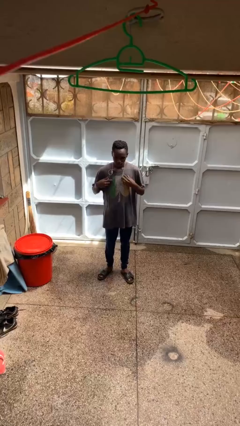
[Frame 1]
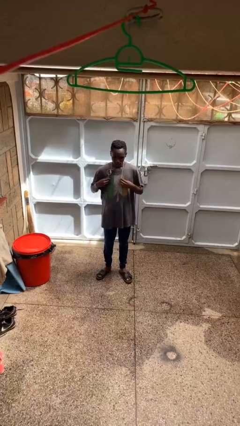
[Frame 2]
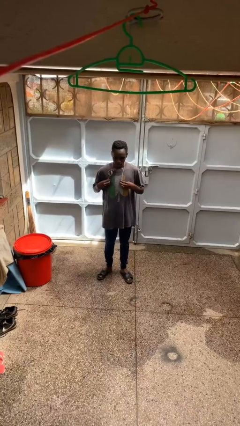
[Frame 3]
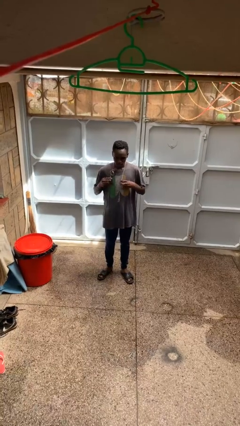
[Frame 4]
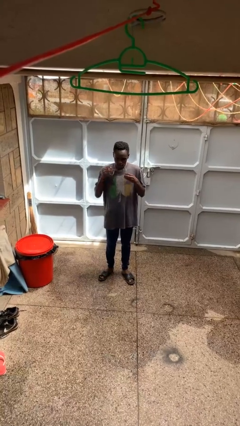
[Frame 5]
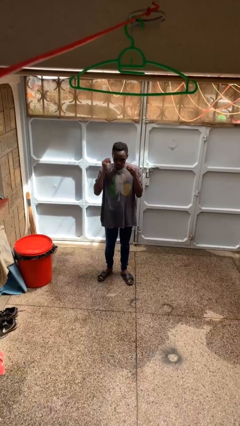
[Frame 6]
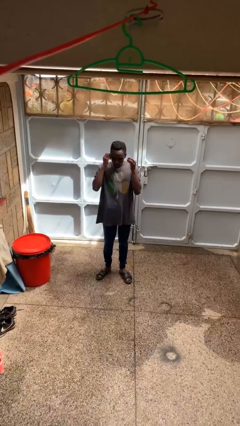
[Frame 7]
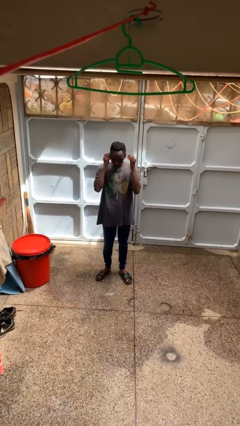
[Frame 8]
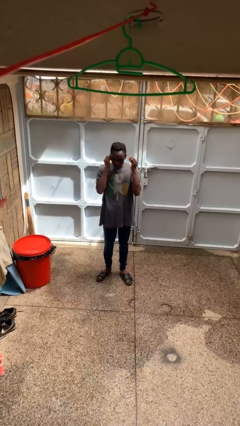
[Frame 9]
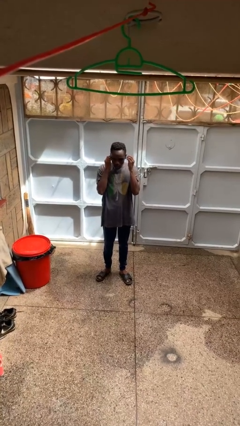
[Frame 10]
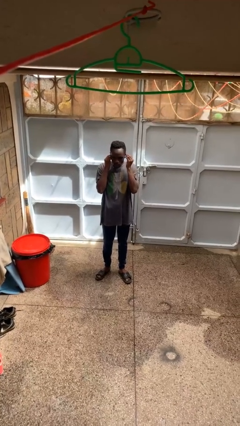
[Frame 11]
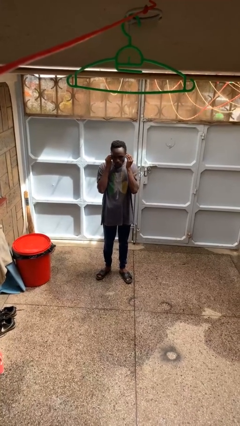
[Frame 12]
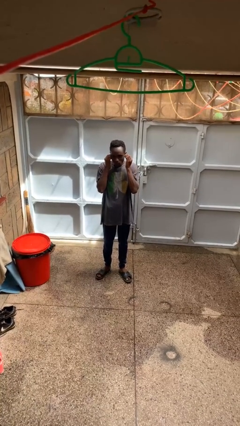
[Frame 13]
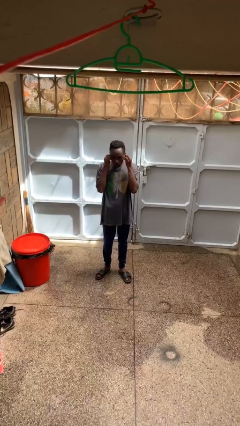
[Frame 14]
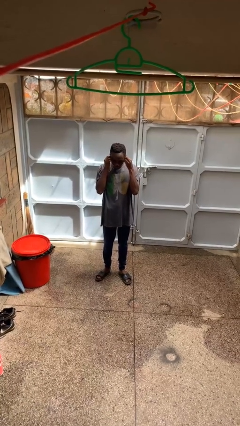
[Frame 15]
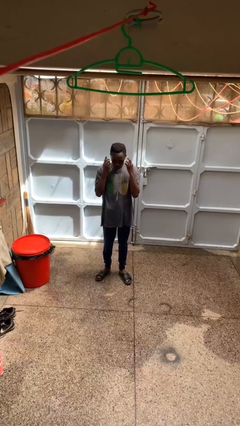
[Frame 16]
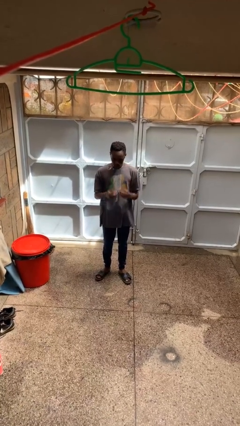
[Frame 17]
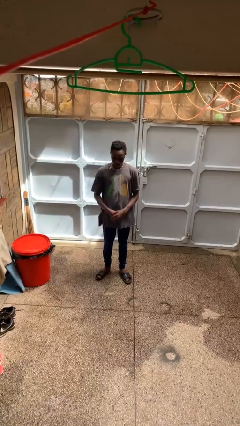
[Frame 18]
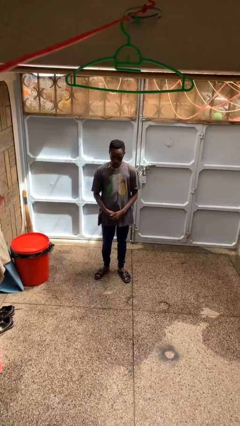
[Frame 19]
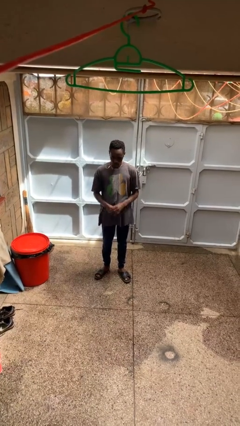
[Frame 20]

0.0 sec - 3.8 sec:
person puts on headphones

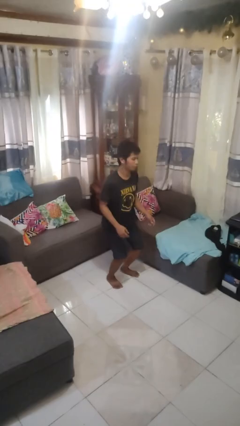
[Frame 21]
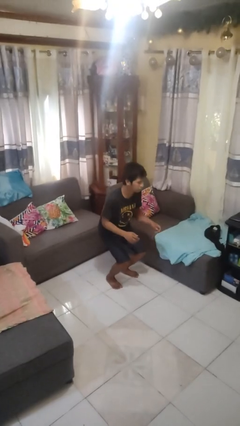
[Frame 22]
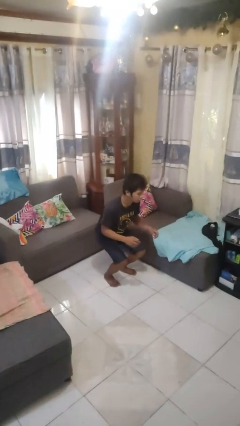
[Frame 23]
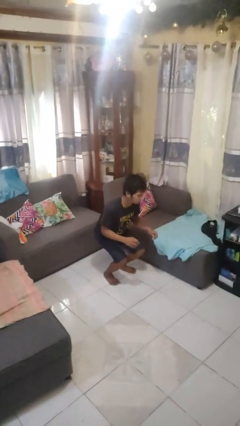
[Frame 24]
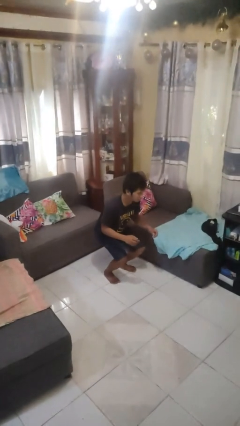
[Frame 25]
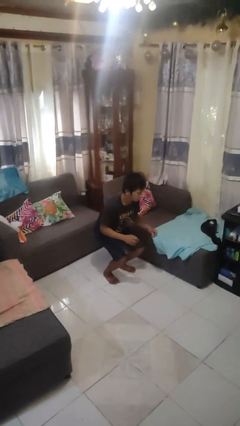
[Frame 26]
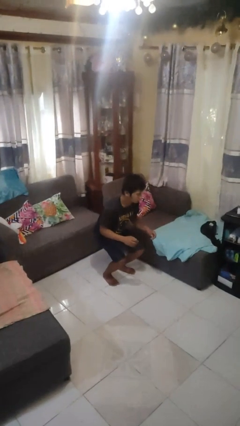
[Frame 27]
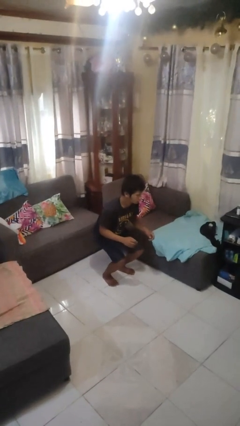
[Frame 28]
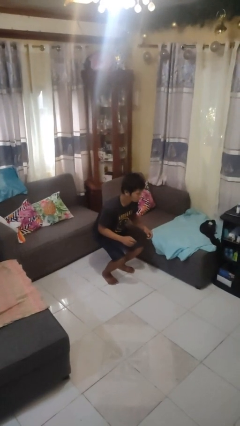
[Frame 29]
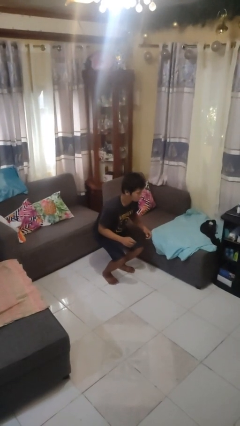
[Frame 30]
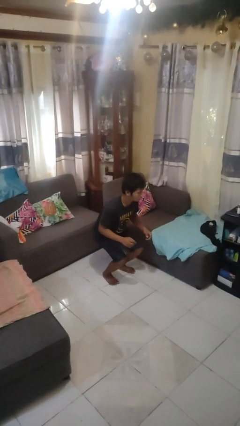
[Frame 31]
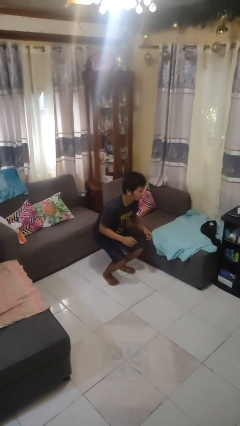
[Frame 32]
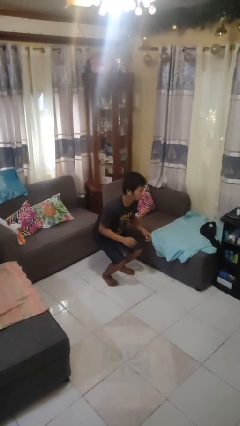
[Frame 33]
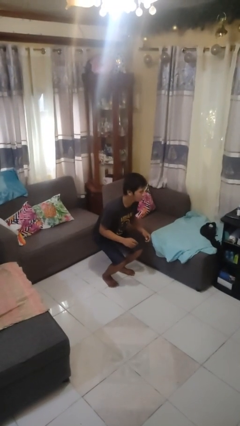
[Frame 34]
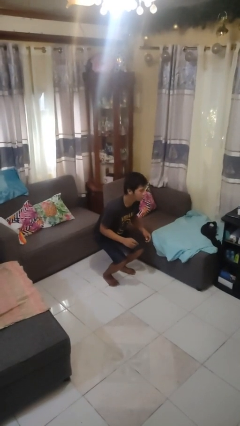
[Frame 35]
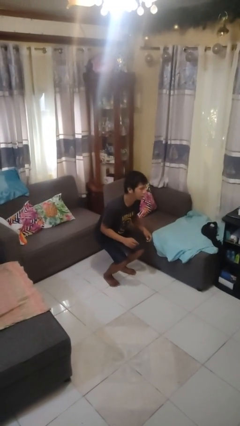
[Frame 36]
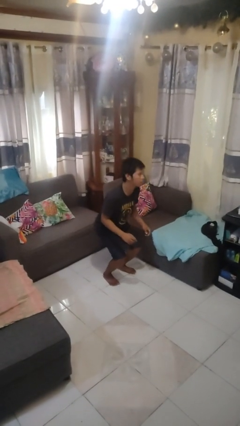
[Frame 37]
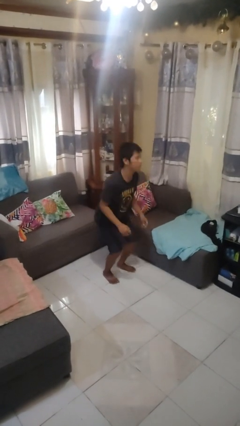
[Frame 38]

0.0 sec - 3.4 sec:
person squats

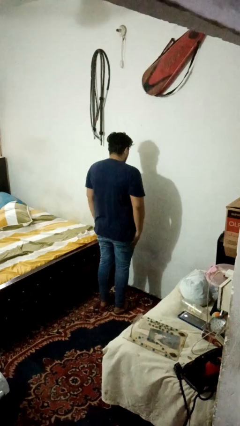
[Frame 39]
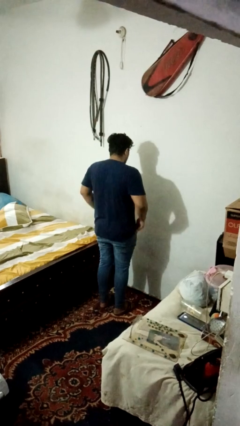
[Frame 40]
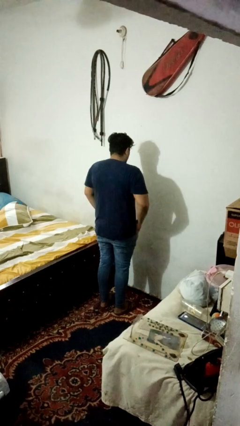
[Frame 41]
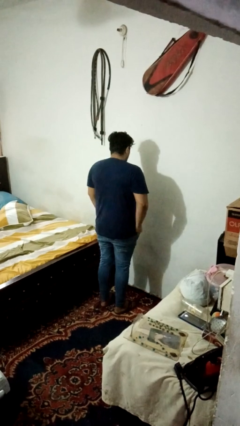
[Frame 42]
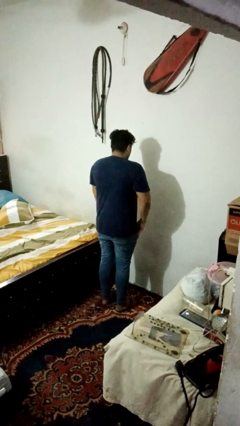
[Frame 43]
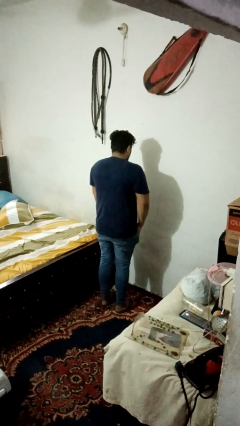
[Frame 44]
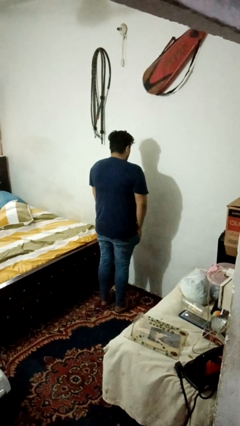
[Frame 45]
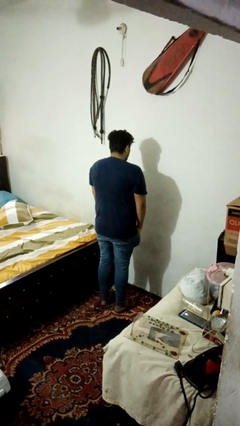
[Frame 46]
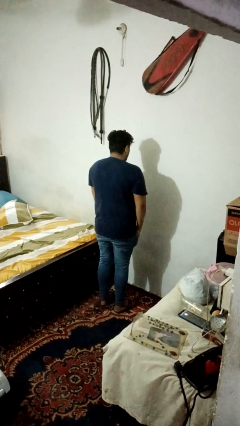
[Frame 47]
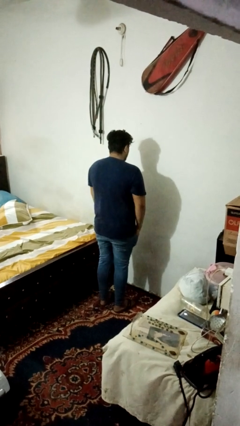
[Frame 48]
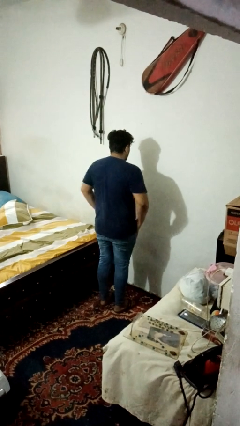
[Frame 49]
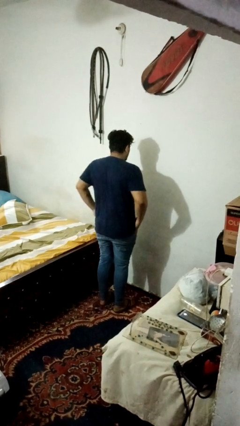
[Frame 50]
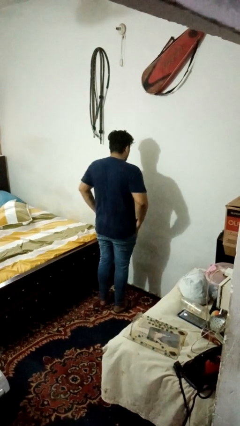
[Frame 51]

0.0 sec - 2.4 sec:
person puts hands in back pockets

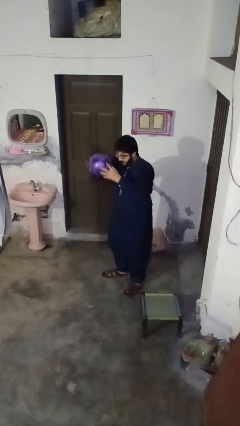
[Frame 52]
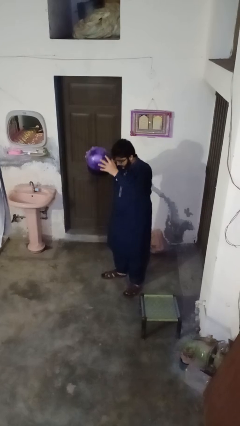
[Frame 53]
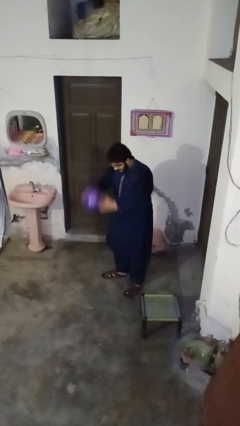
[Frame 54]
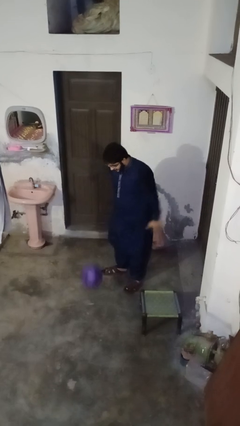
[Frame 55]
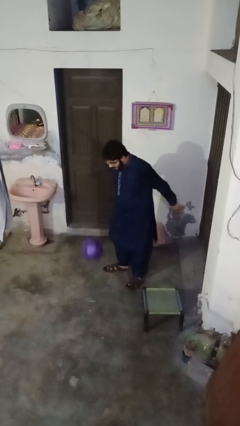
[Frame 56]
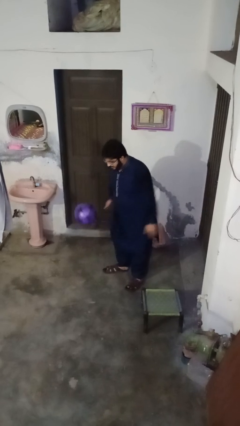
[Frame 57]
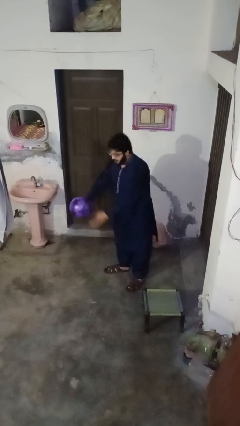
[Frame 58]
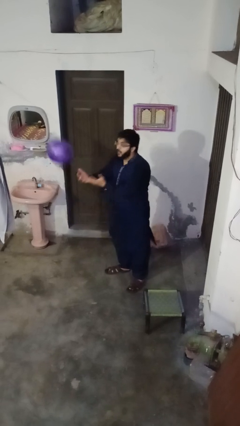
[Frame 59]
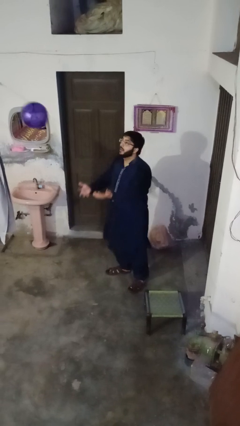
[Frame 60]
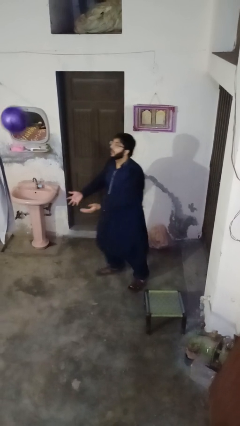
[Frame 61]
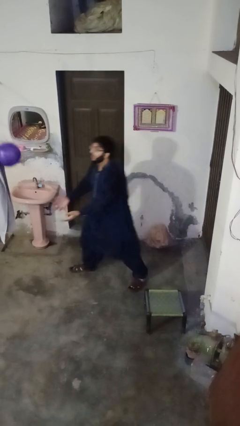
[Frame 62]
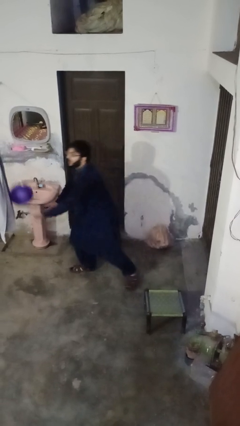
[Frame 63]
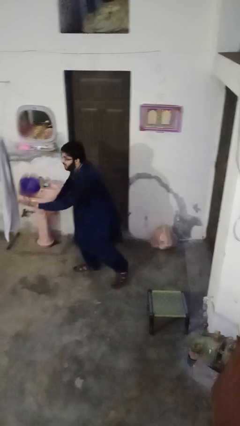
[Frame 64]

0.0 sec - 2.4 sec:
person bounces ball on floor

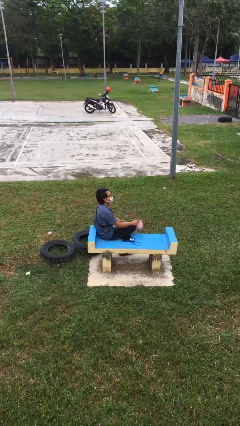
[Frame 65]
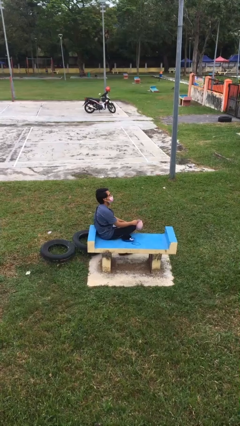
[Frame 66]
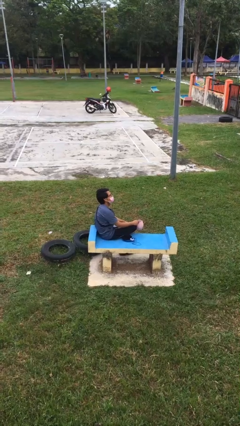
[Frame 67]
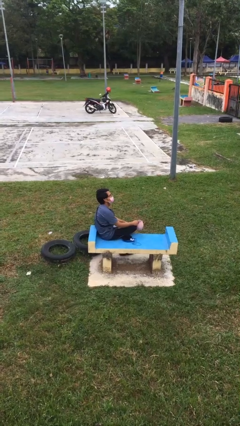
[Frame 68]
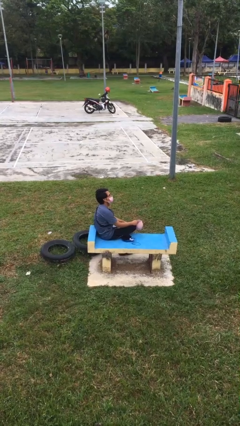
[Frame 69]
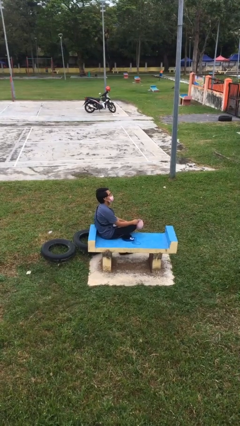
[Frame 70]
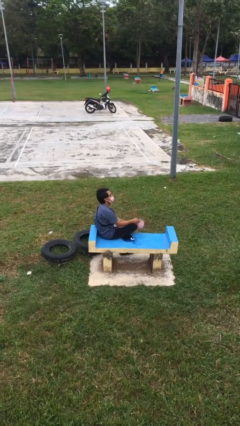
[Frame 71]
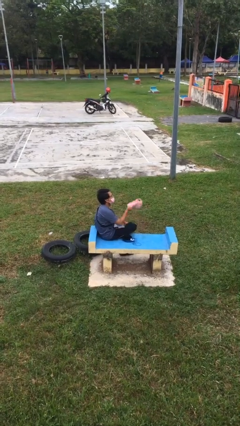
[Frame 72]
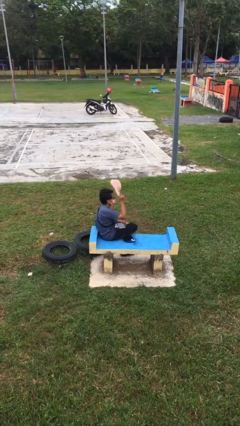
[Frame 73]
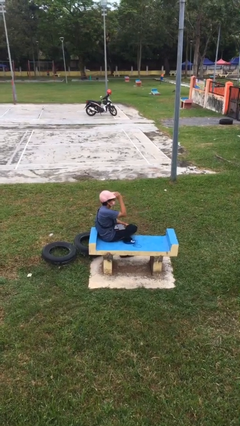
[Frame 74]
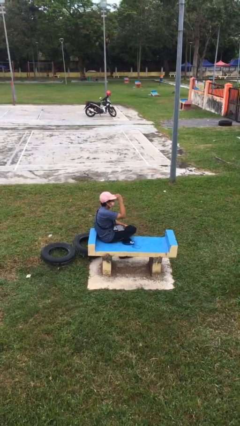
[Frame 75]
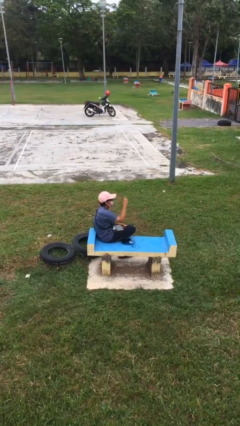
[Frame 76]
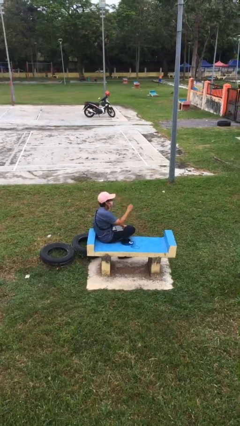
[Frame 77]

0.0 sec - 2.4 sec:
person puts on hat

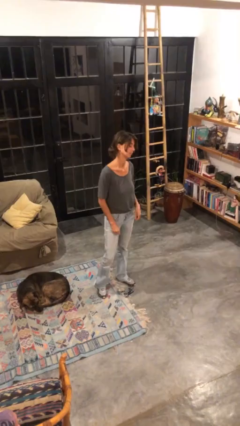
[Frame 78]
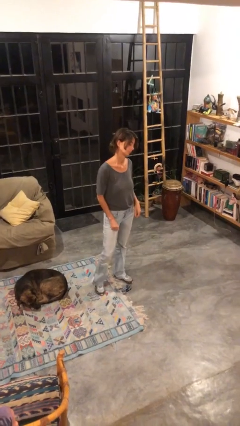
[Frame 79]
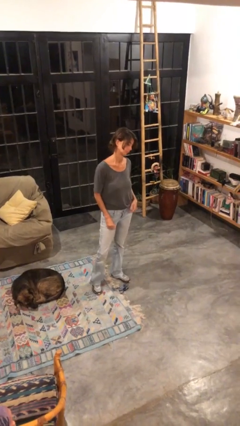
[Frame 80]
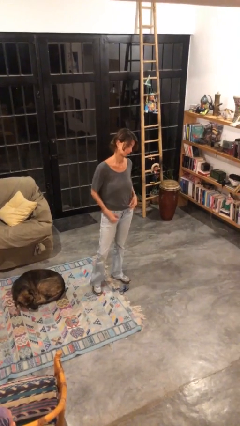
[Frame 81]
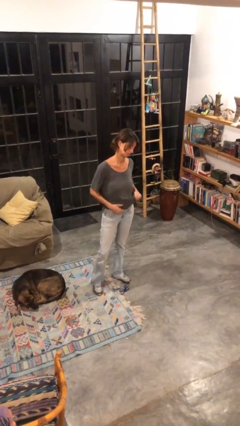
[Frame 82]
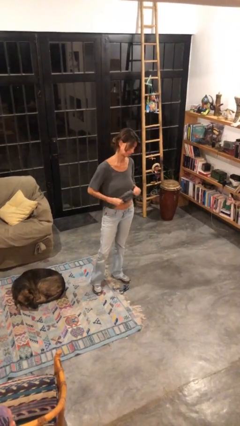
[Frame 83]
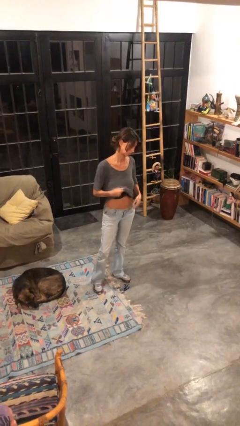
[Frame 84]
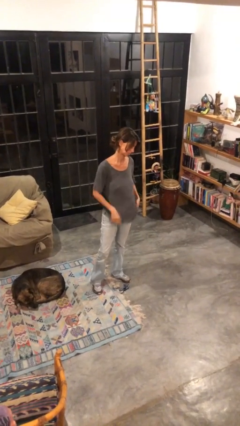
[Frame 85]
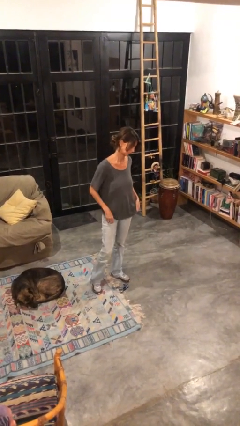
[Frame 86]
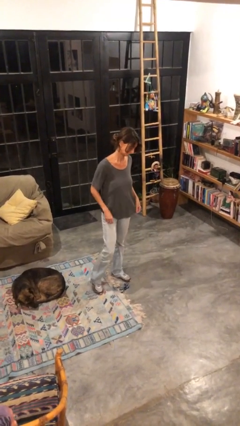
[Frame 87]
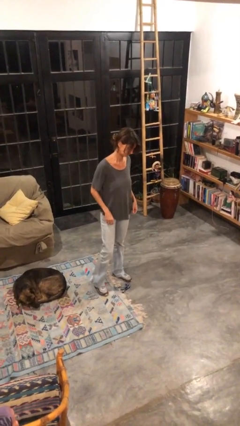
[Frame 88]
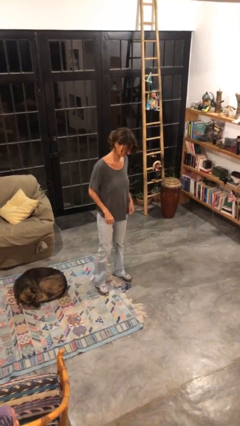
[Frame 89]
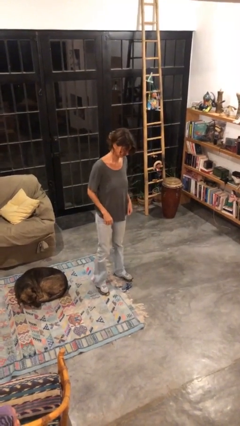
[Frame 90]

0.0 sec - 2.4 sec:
person untucks shirt
